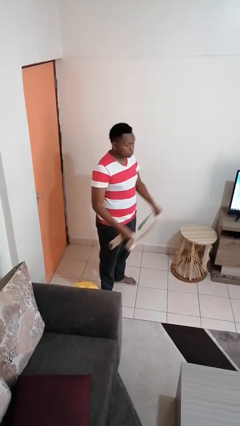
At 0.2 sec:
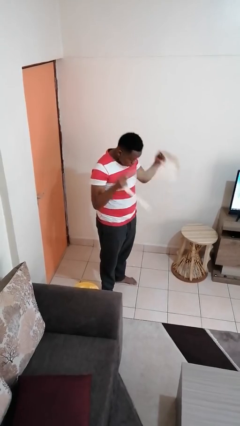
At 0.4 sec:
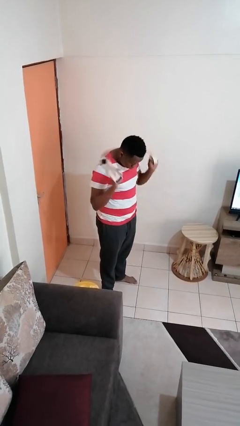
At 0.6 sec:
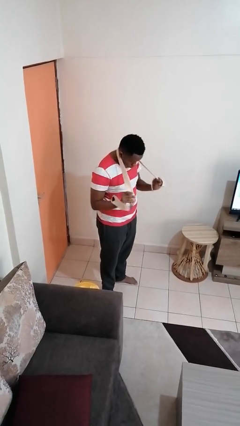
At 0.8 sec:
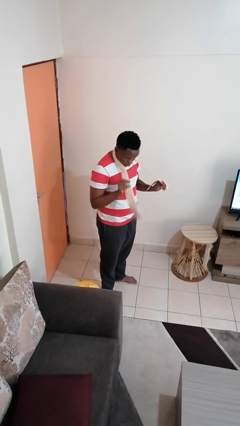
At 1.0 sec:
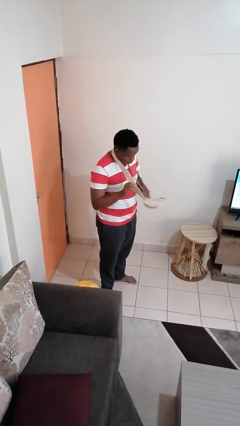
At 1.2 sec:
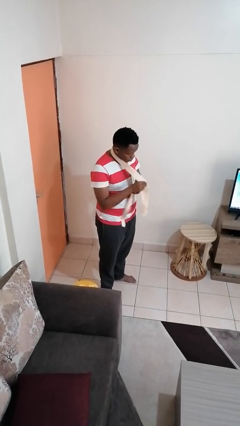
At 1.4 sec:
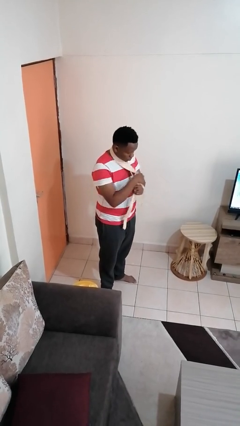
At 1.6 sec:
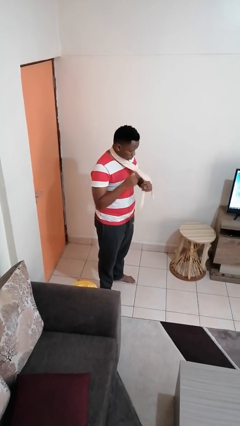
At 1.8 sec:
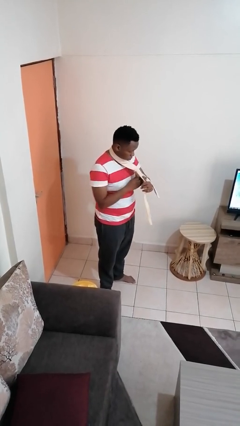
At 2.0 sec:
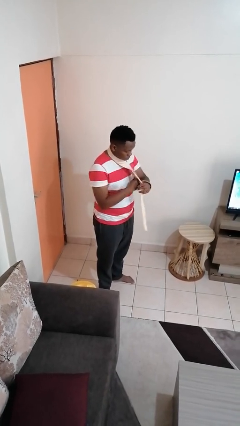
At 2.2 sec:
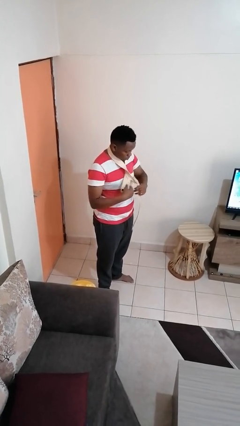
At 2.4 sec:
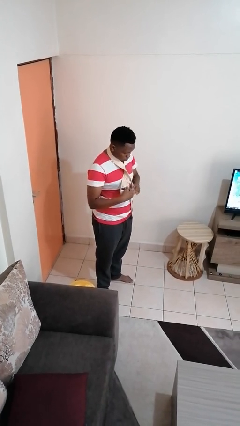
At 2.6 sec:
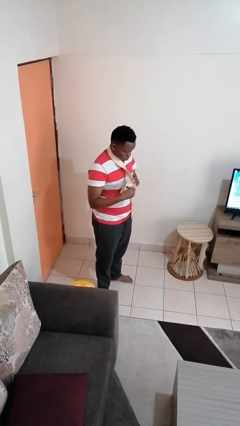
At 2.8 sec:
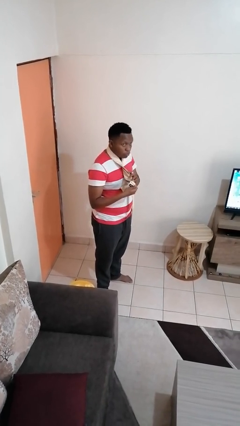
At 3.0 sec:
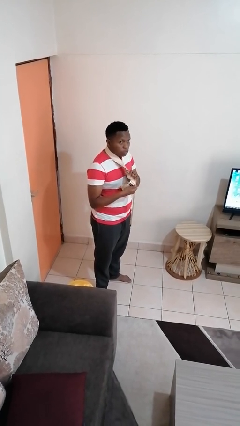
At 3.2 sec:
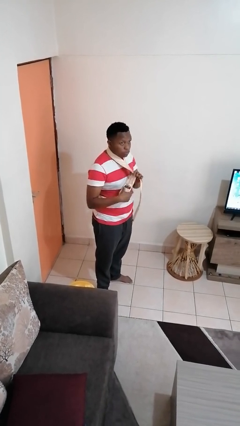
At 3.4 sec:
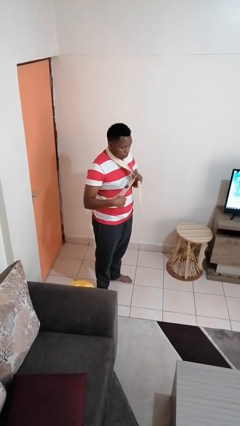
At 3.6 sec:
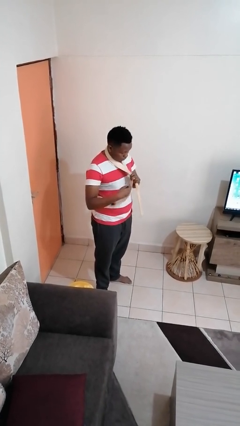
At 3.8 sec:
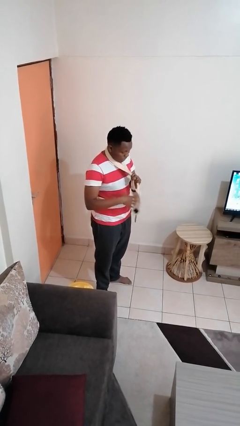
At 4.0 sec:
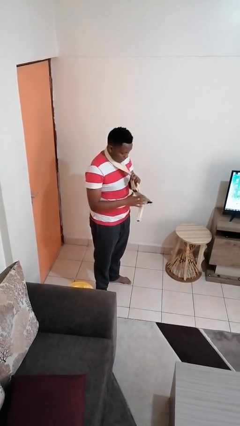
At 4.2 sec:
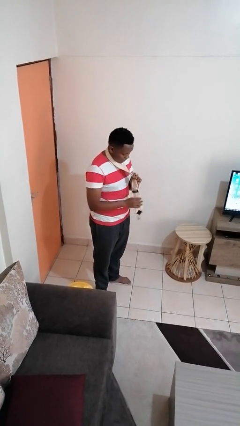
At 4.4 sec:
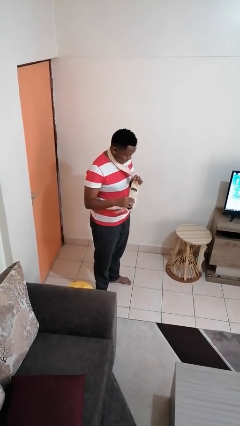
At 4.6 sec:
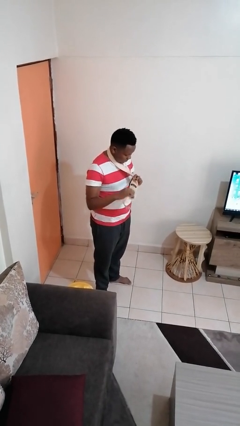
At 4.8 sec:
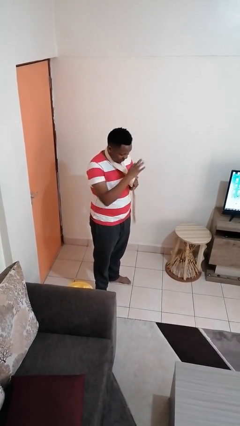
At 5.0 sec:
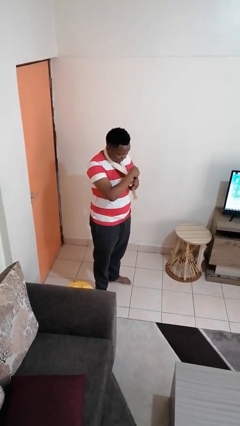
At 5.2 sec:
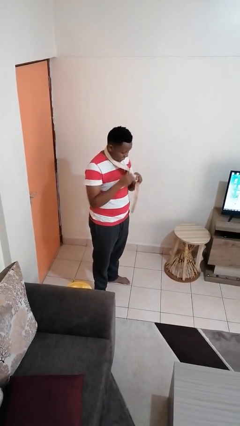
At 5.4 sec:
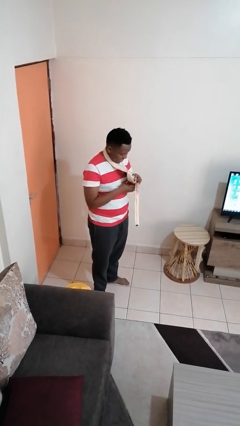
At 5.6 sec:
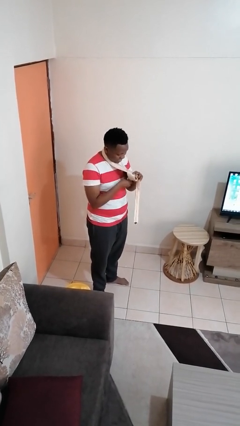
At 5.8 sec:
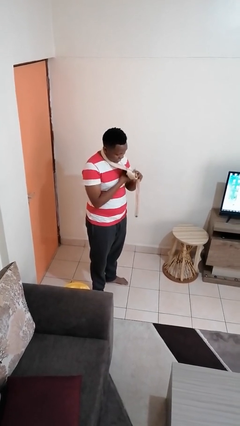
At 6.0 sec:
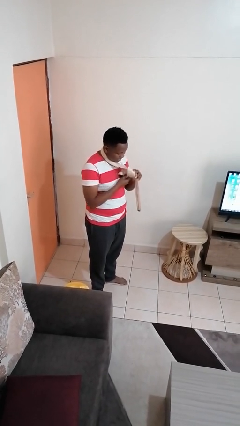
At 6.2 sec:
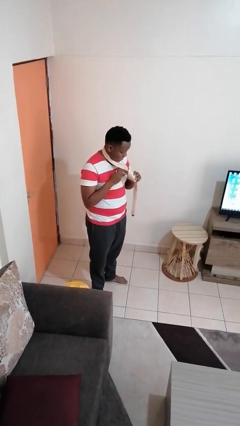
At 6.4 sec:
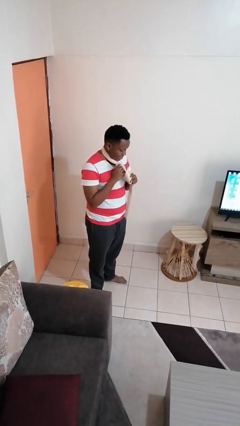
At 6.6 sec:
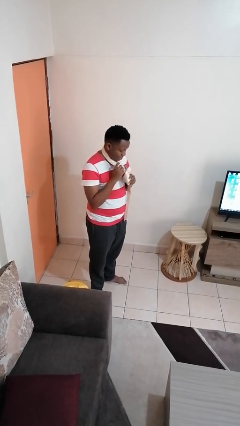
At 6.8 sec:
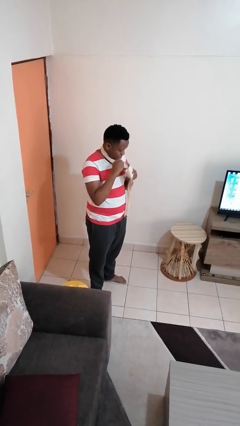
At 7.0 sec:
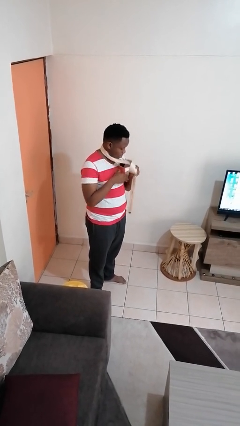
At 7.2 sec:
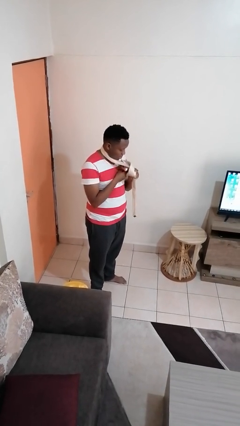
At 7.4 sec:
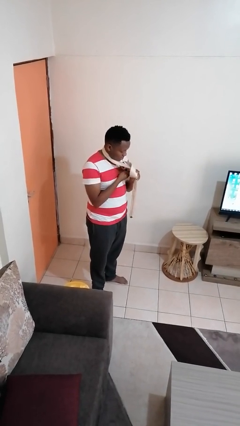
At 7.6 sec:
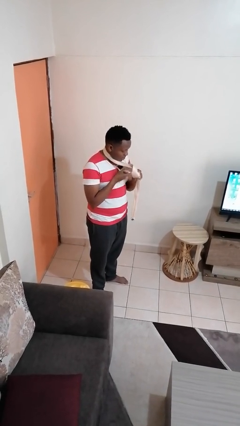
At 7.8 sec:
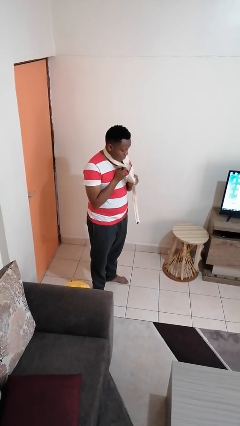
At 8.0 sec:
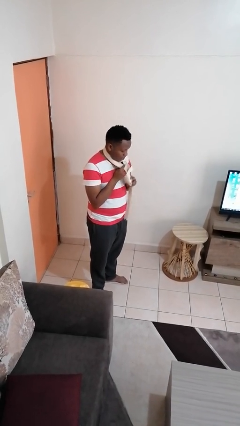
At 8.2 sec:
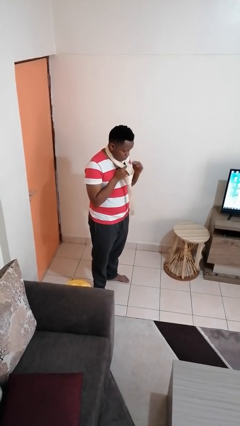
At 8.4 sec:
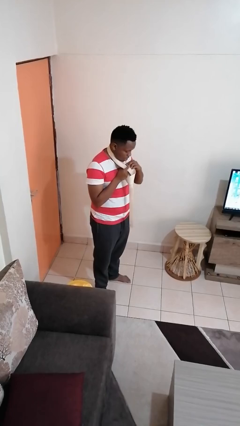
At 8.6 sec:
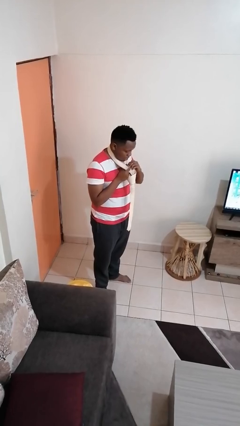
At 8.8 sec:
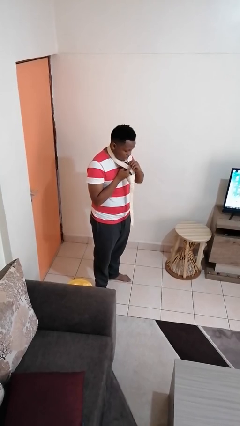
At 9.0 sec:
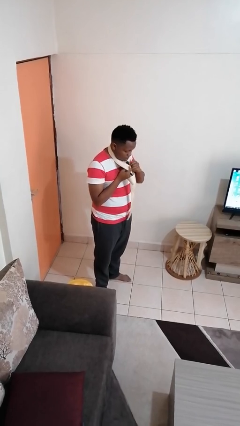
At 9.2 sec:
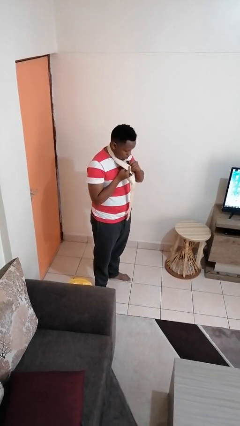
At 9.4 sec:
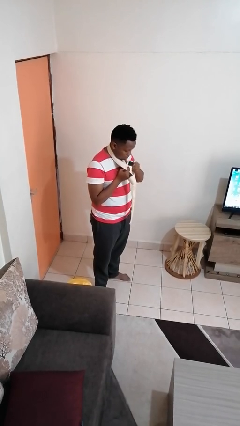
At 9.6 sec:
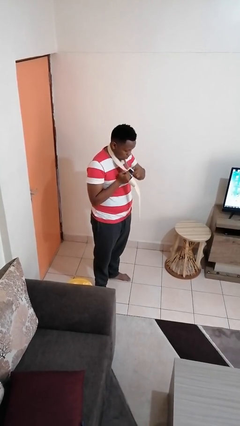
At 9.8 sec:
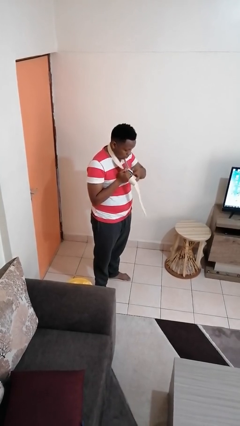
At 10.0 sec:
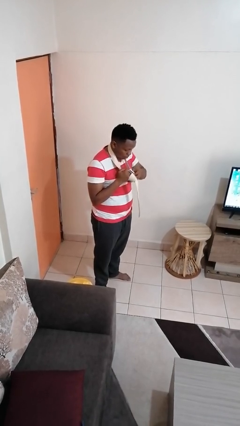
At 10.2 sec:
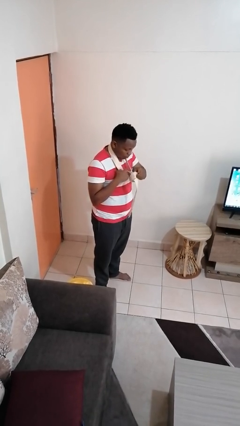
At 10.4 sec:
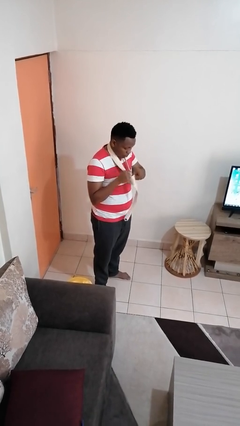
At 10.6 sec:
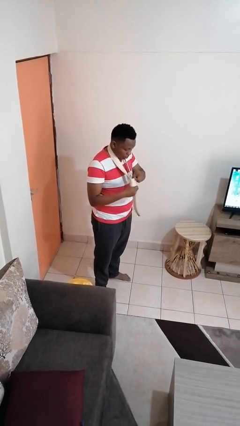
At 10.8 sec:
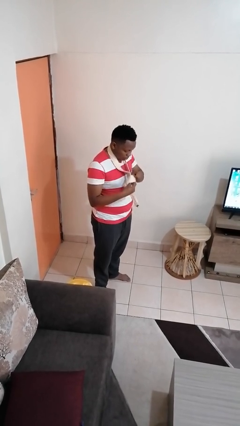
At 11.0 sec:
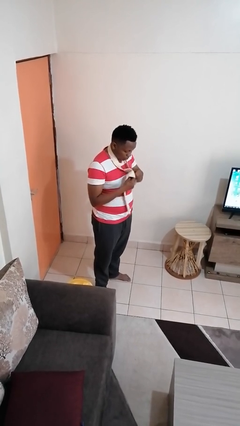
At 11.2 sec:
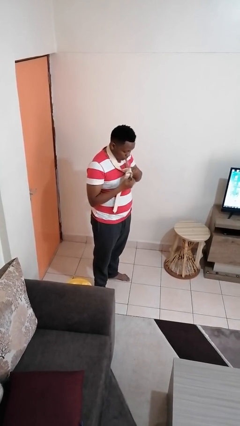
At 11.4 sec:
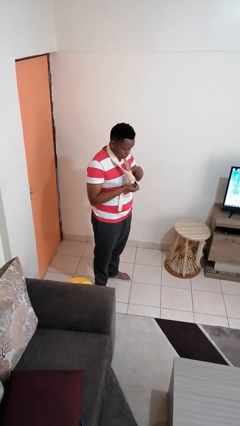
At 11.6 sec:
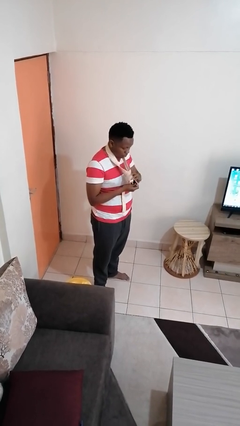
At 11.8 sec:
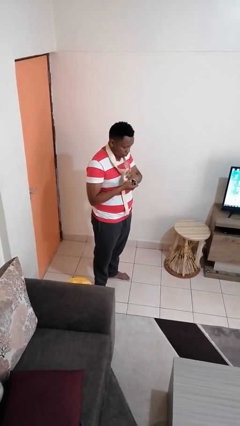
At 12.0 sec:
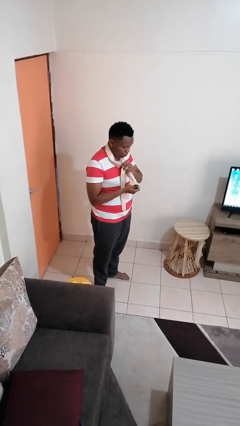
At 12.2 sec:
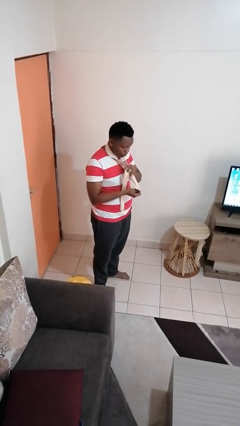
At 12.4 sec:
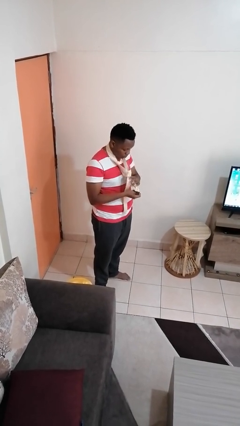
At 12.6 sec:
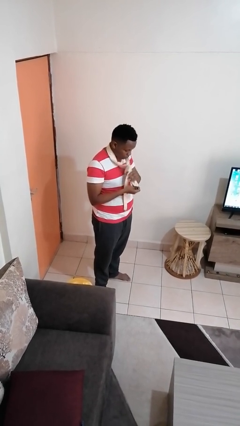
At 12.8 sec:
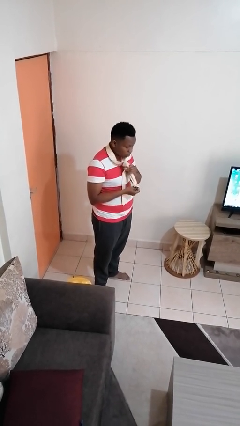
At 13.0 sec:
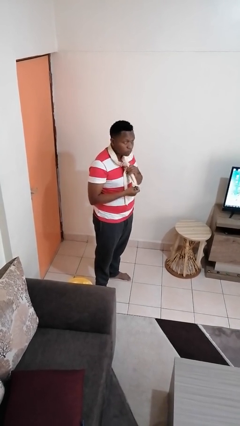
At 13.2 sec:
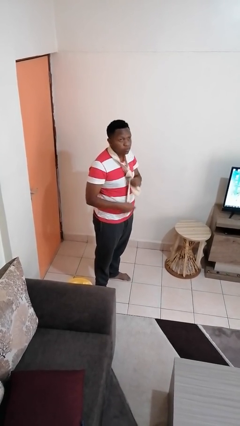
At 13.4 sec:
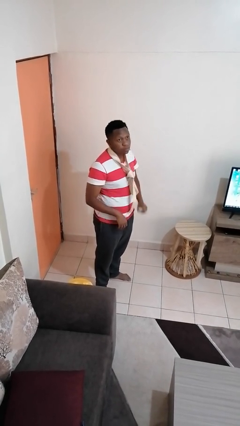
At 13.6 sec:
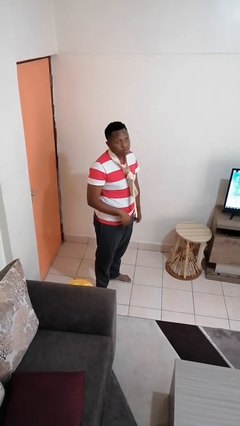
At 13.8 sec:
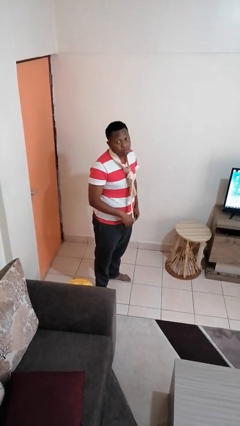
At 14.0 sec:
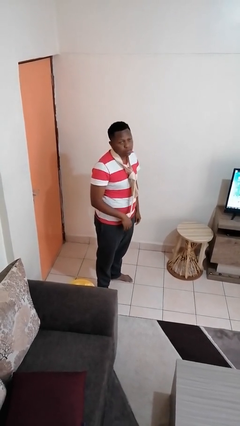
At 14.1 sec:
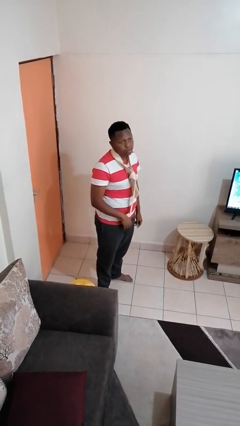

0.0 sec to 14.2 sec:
person puts on necktie

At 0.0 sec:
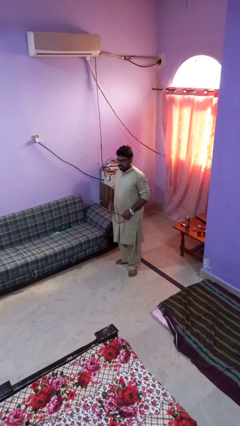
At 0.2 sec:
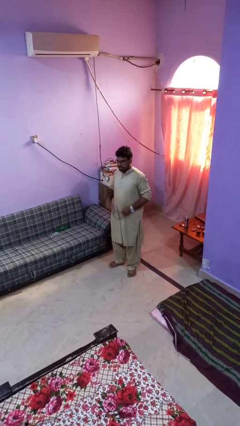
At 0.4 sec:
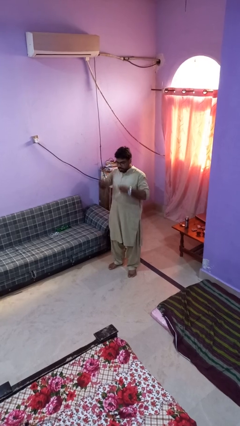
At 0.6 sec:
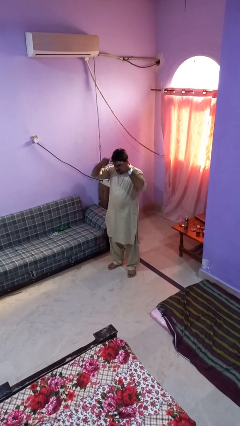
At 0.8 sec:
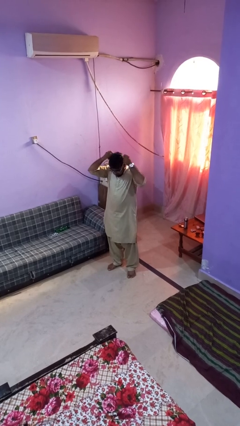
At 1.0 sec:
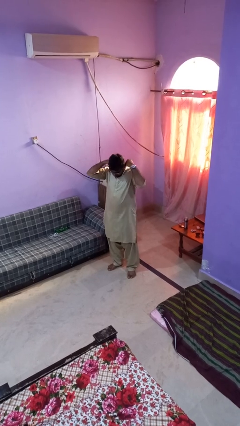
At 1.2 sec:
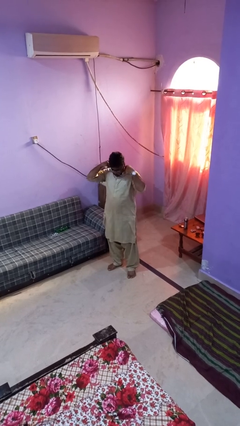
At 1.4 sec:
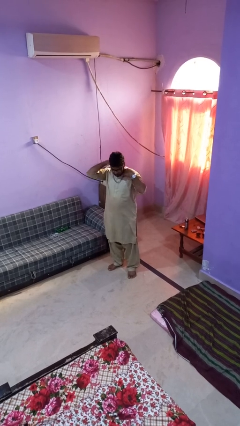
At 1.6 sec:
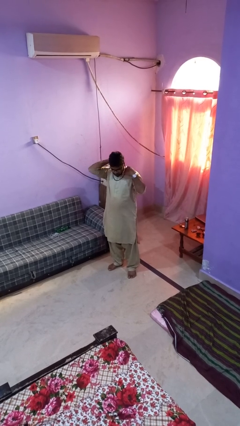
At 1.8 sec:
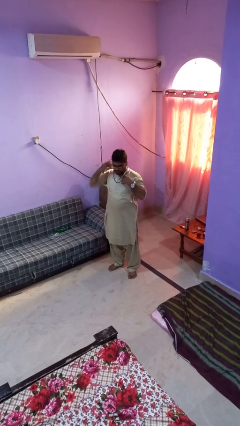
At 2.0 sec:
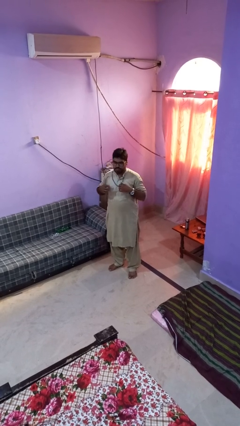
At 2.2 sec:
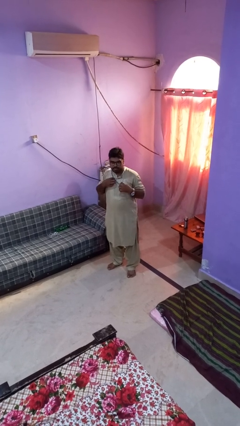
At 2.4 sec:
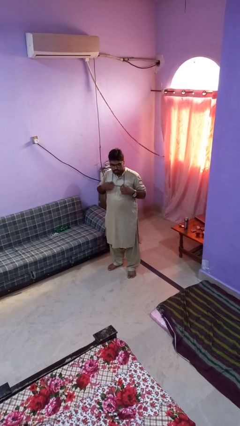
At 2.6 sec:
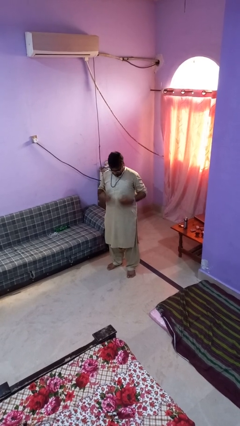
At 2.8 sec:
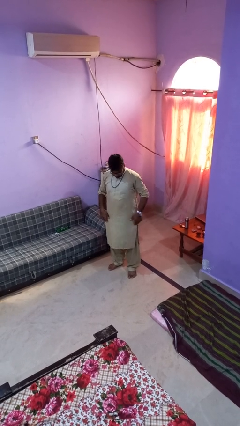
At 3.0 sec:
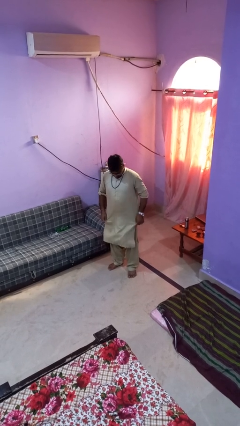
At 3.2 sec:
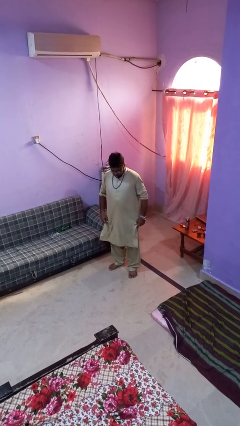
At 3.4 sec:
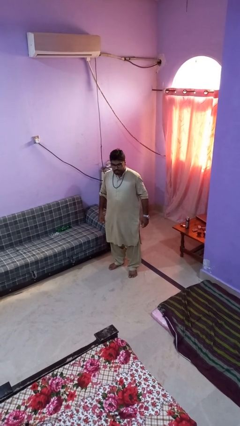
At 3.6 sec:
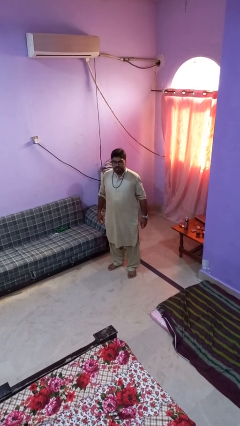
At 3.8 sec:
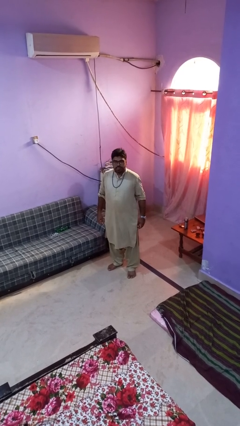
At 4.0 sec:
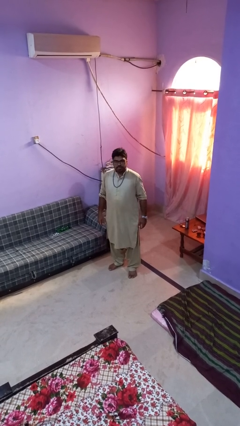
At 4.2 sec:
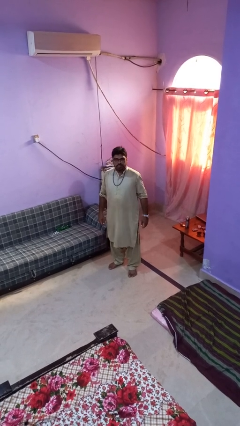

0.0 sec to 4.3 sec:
person puts on necklace
